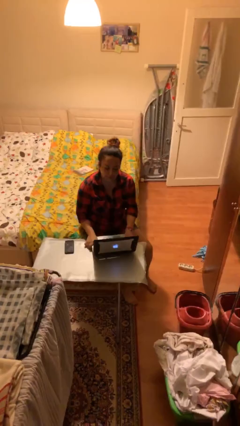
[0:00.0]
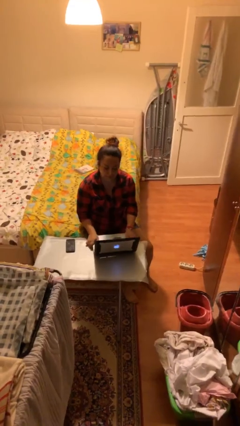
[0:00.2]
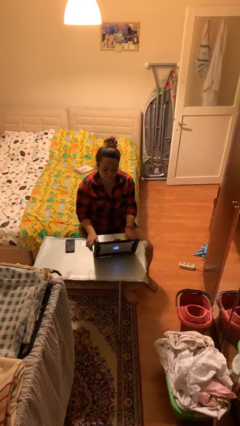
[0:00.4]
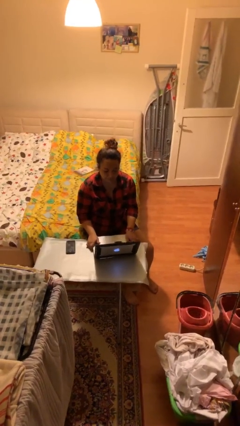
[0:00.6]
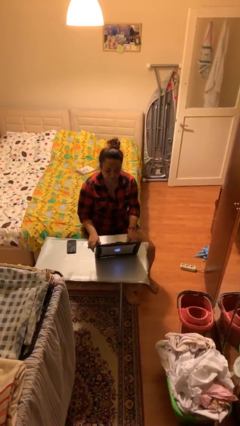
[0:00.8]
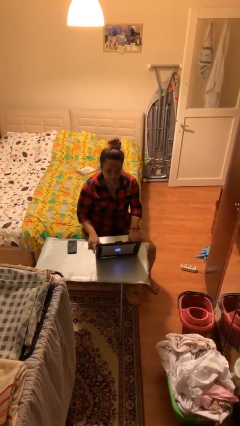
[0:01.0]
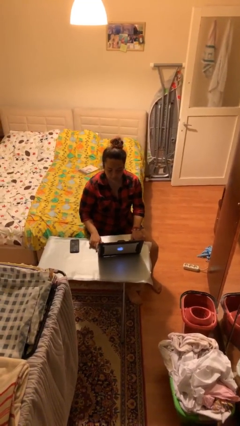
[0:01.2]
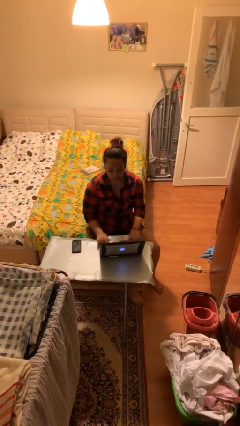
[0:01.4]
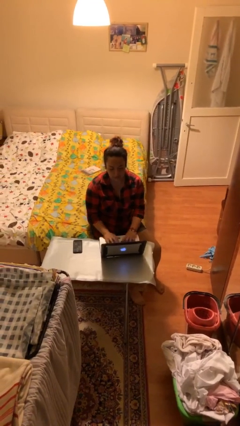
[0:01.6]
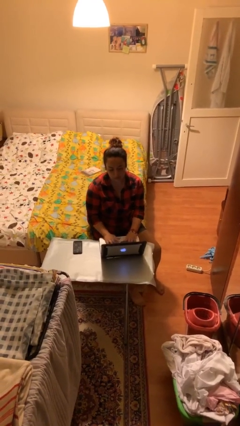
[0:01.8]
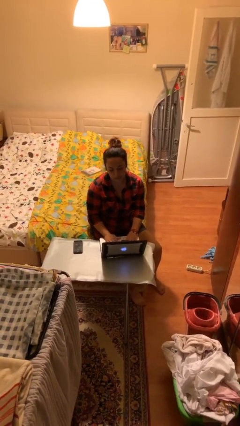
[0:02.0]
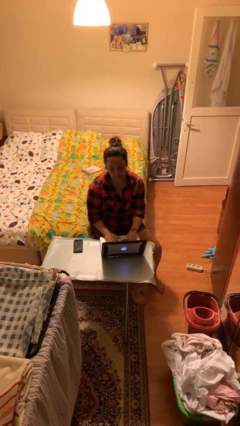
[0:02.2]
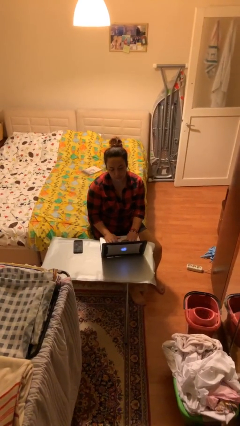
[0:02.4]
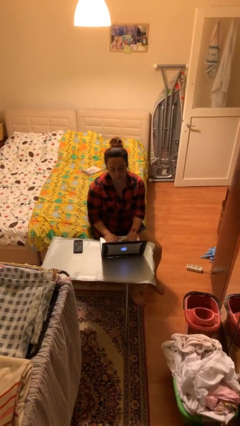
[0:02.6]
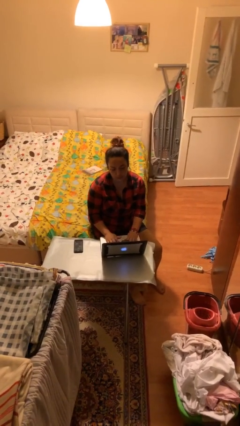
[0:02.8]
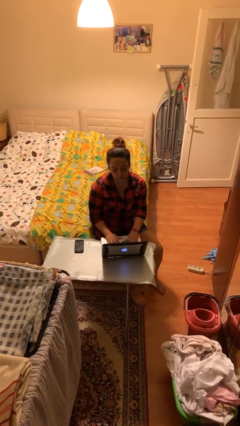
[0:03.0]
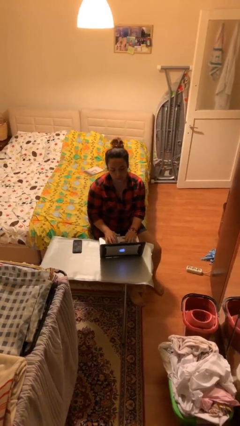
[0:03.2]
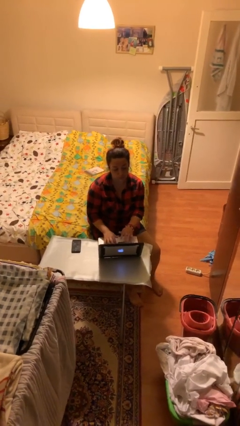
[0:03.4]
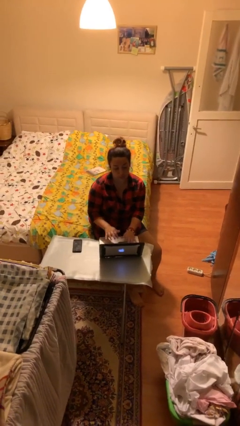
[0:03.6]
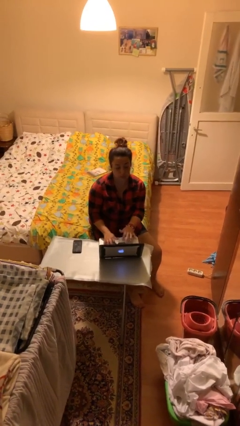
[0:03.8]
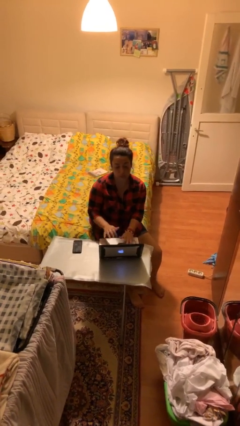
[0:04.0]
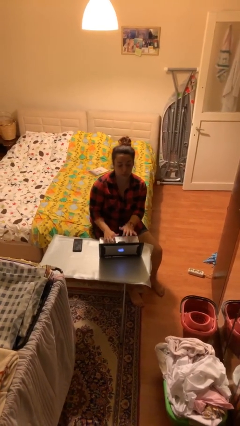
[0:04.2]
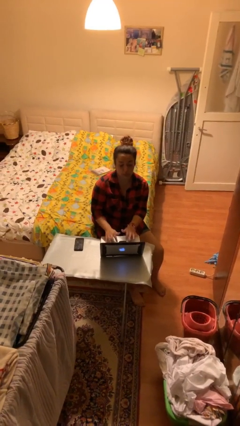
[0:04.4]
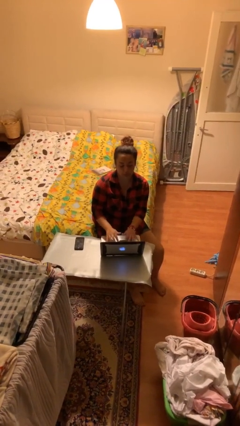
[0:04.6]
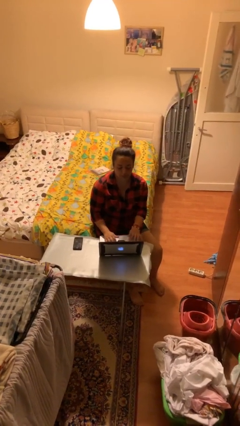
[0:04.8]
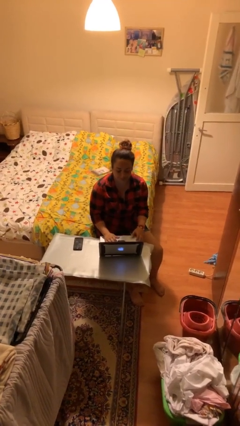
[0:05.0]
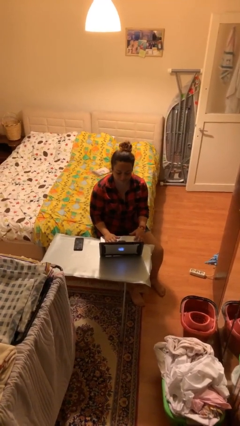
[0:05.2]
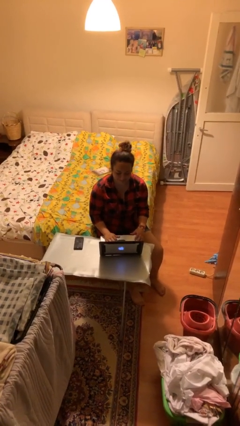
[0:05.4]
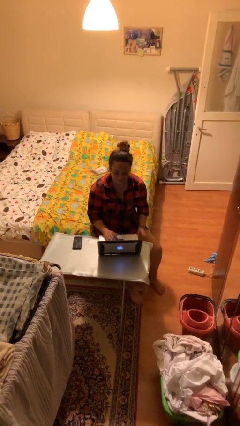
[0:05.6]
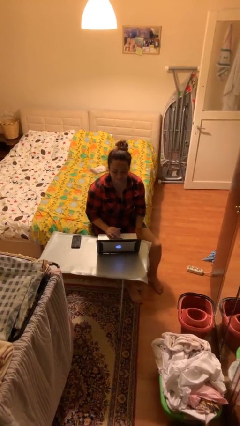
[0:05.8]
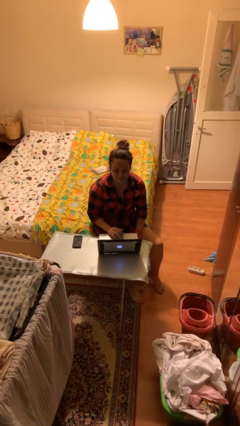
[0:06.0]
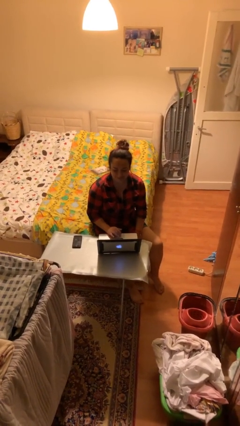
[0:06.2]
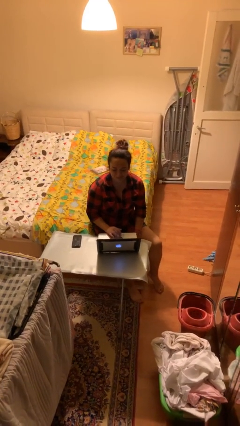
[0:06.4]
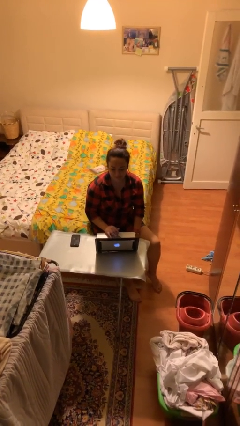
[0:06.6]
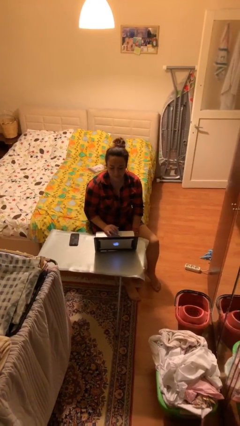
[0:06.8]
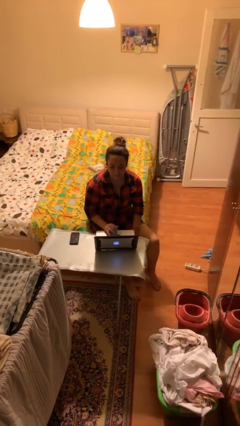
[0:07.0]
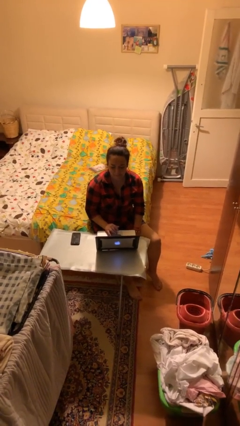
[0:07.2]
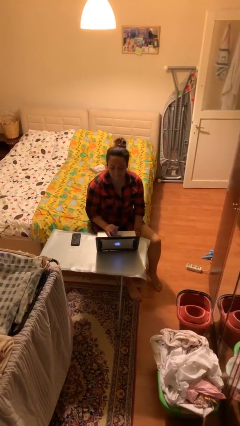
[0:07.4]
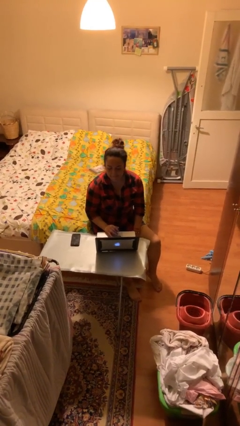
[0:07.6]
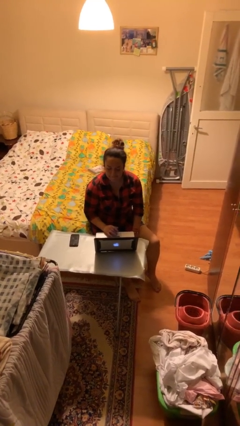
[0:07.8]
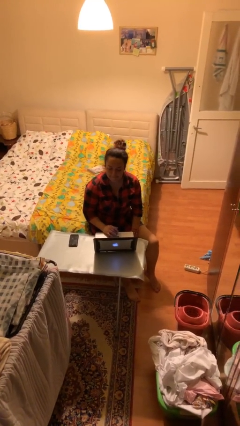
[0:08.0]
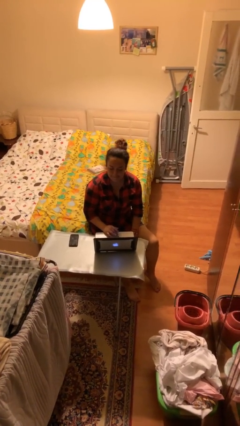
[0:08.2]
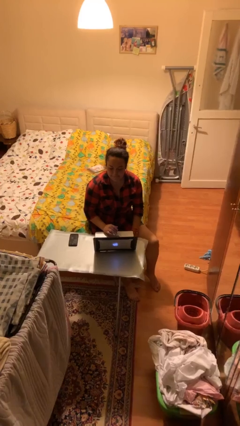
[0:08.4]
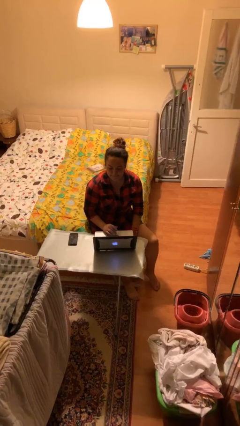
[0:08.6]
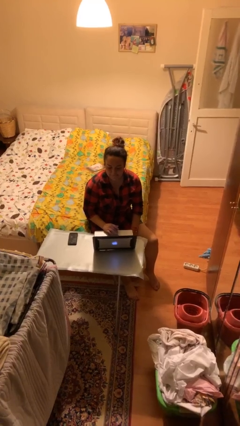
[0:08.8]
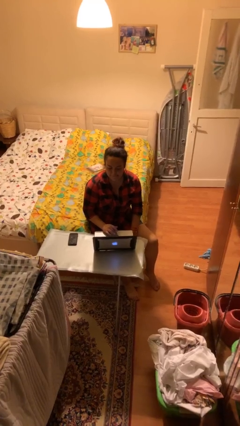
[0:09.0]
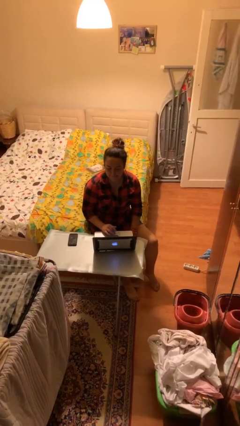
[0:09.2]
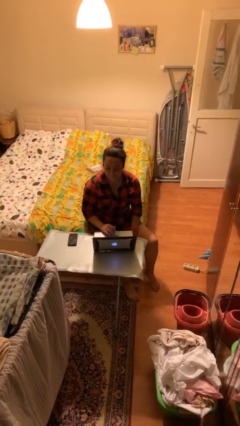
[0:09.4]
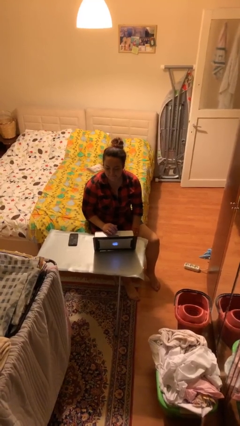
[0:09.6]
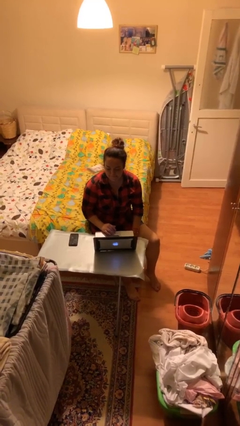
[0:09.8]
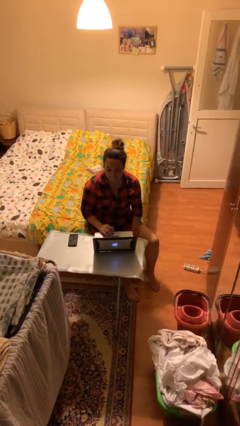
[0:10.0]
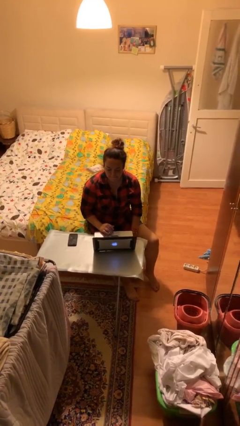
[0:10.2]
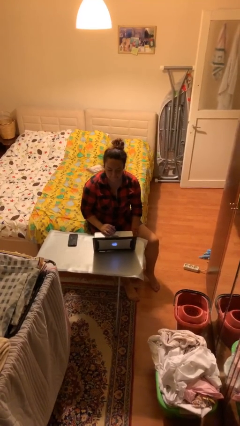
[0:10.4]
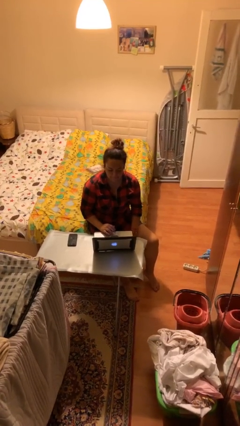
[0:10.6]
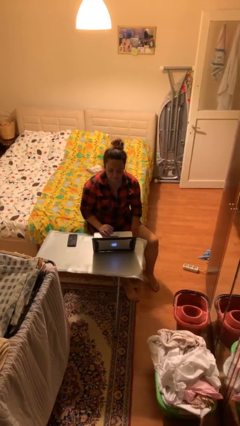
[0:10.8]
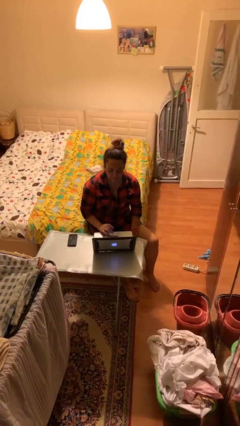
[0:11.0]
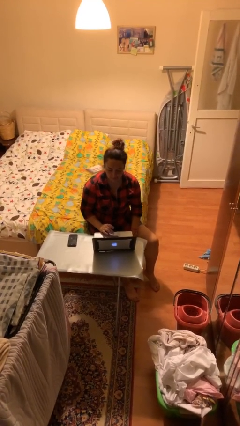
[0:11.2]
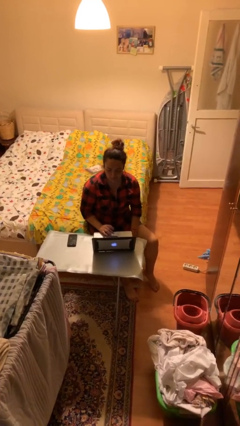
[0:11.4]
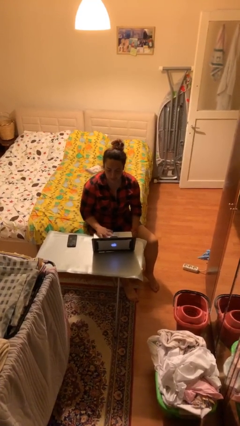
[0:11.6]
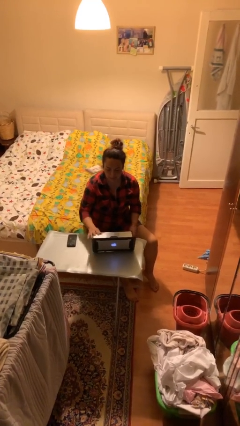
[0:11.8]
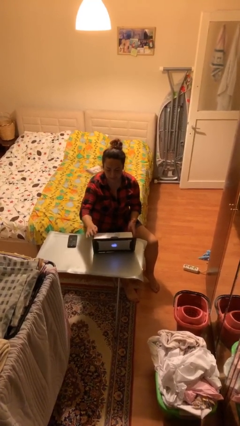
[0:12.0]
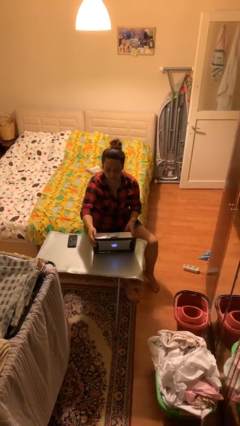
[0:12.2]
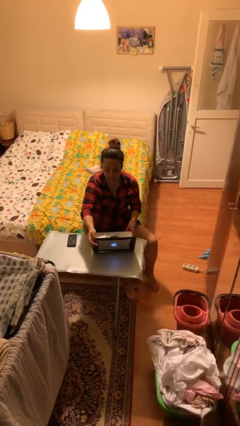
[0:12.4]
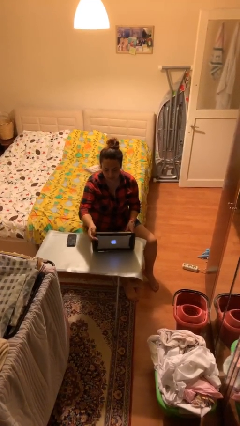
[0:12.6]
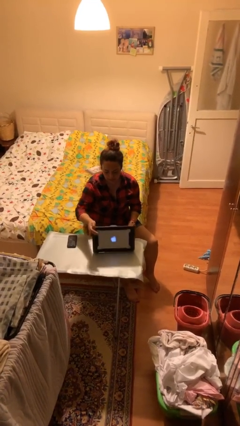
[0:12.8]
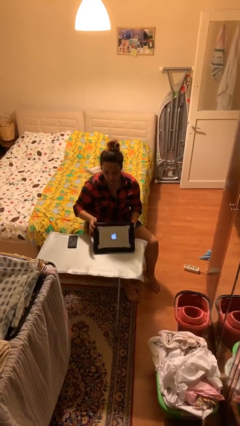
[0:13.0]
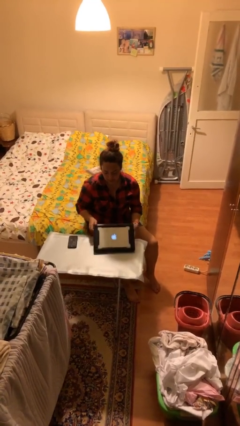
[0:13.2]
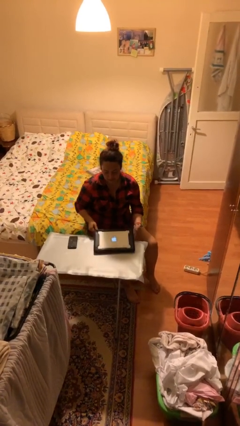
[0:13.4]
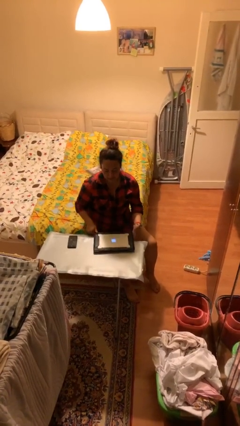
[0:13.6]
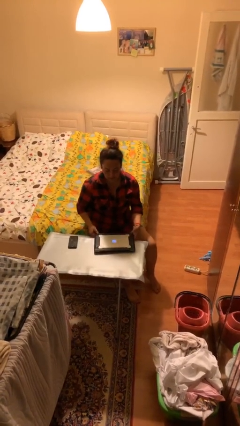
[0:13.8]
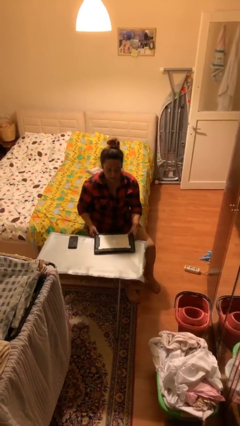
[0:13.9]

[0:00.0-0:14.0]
person interacts with laptop

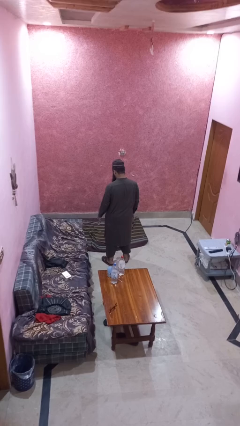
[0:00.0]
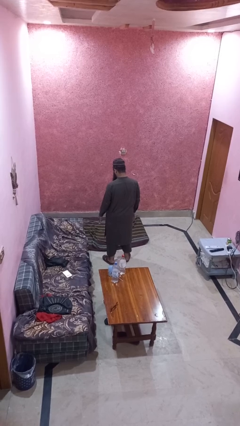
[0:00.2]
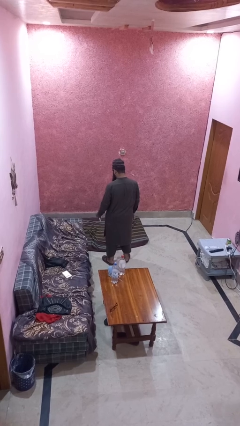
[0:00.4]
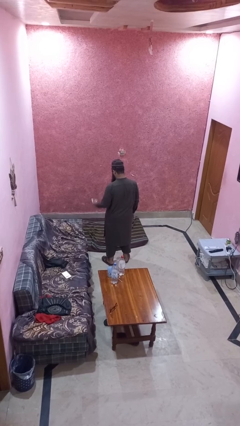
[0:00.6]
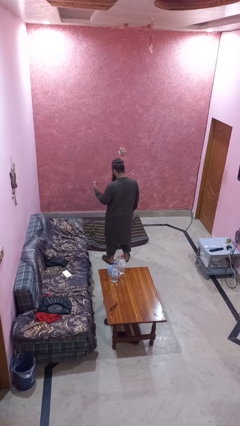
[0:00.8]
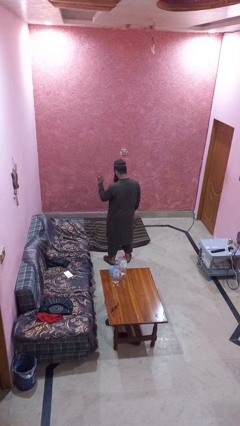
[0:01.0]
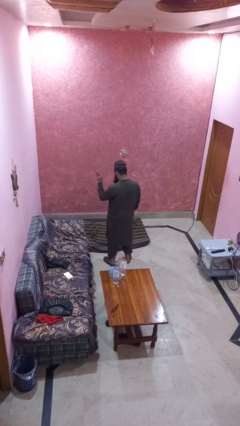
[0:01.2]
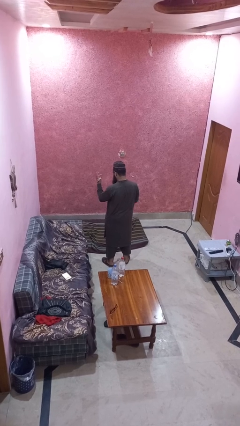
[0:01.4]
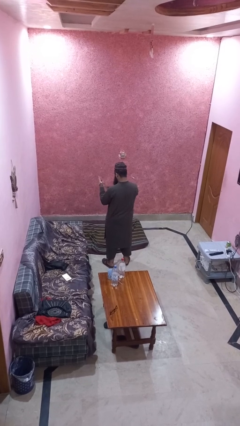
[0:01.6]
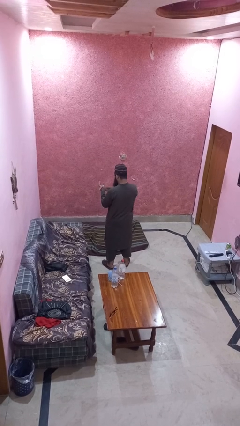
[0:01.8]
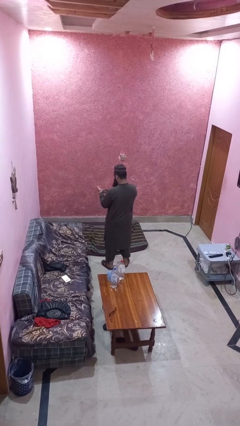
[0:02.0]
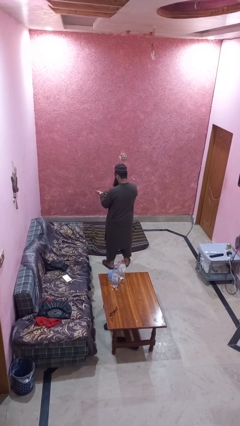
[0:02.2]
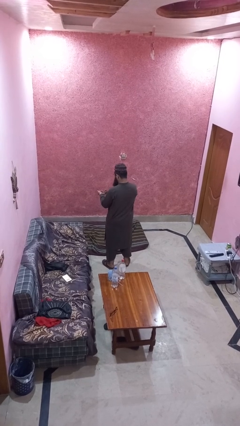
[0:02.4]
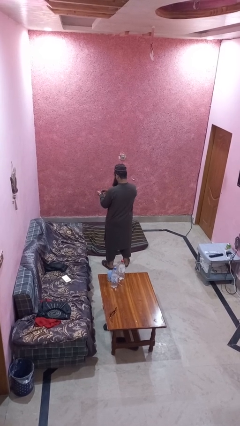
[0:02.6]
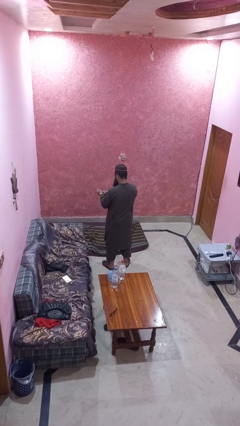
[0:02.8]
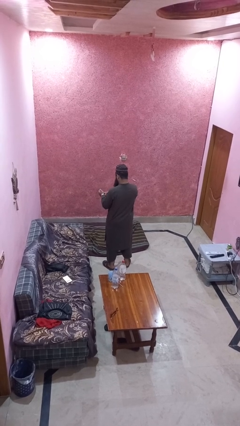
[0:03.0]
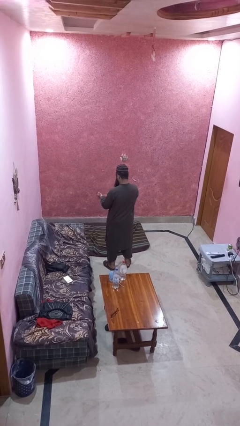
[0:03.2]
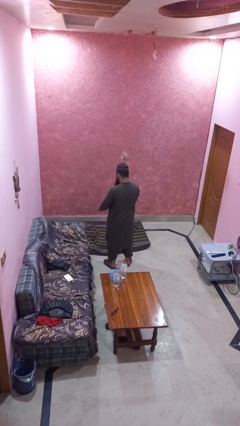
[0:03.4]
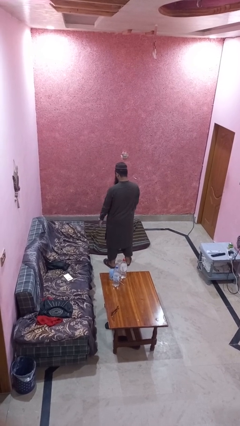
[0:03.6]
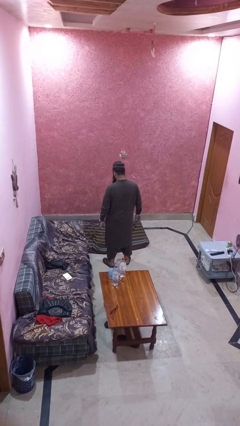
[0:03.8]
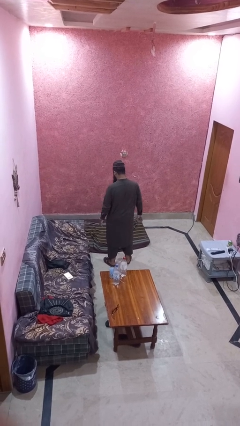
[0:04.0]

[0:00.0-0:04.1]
person puts on wristwatch
